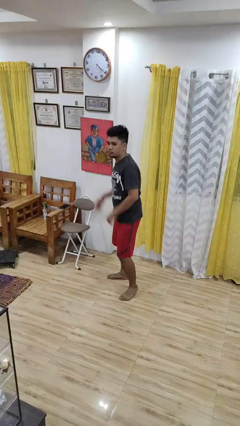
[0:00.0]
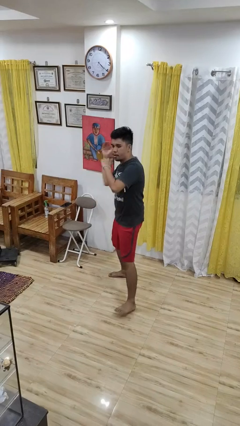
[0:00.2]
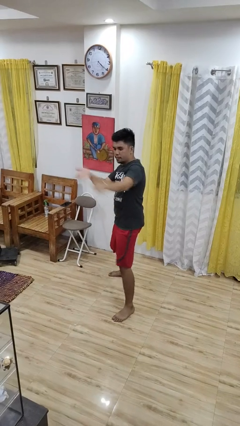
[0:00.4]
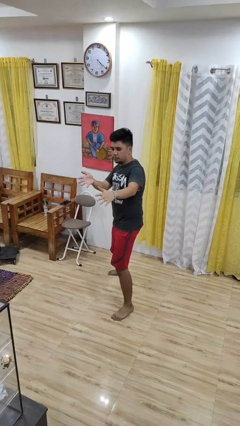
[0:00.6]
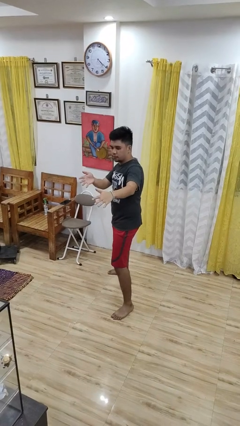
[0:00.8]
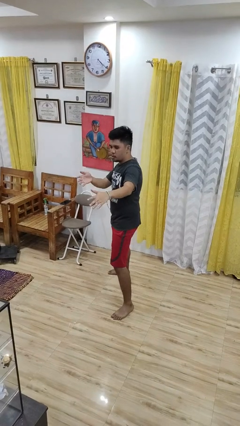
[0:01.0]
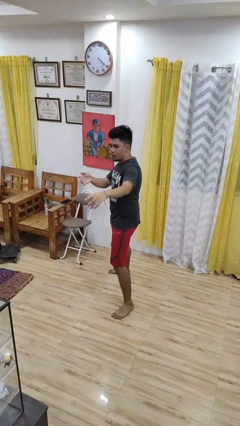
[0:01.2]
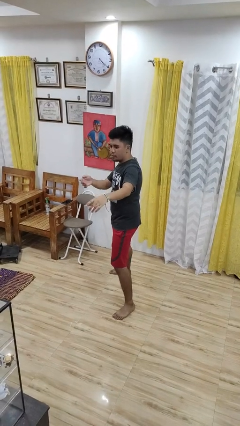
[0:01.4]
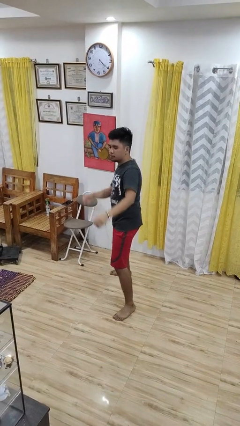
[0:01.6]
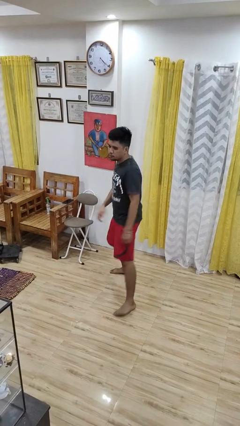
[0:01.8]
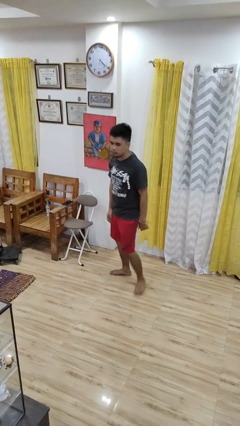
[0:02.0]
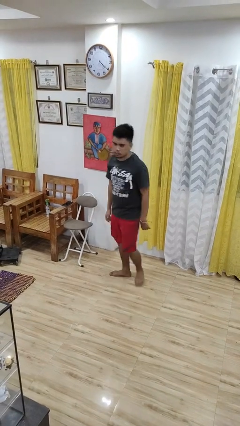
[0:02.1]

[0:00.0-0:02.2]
person karate chop

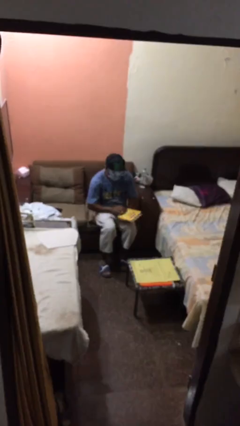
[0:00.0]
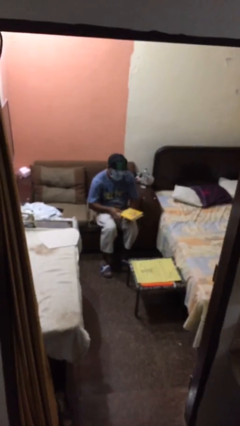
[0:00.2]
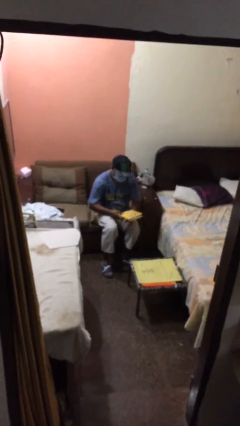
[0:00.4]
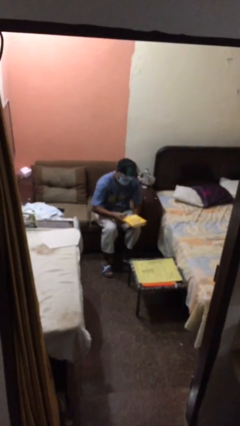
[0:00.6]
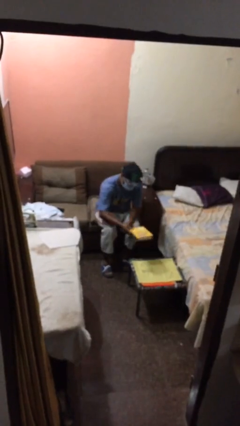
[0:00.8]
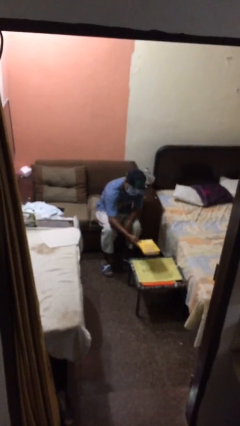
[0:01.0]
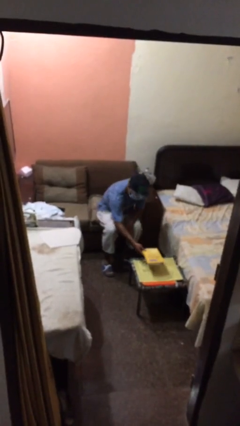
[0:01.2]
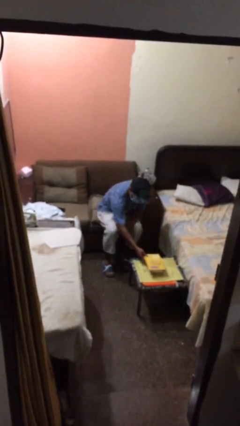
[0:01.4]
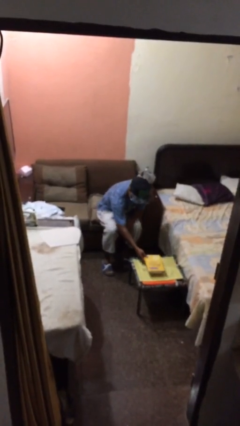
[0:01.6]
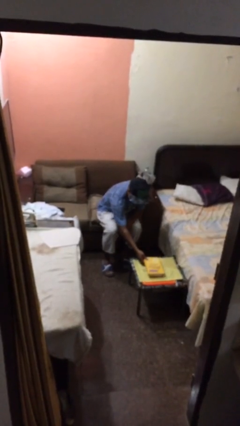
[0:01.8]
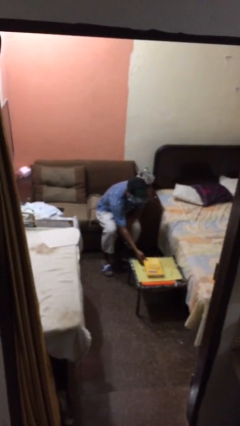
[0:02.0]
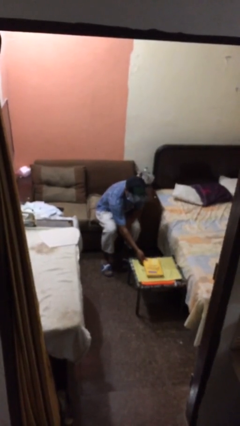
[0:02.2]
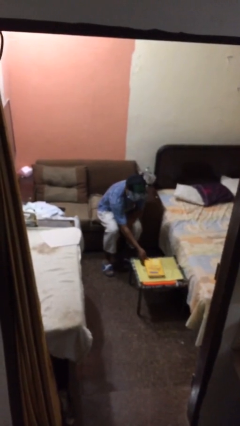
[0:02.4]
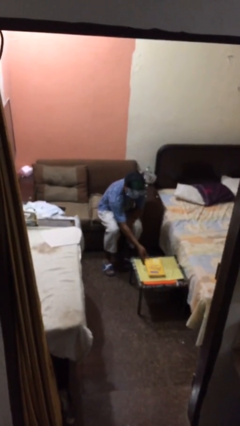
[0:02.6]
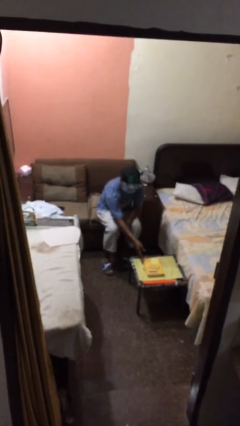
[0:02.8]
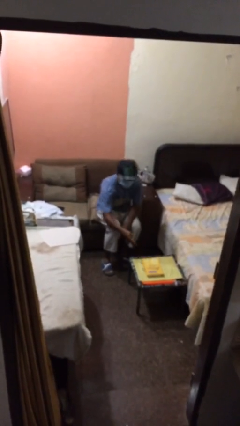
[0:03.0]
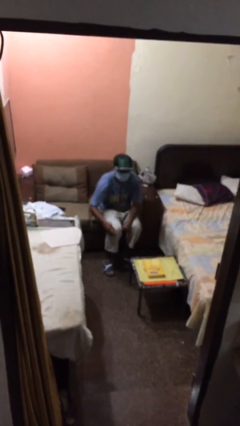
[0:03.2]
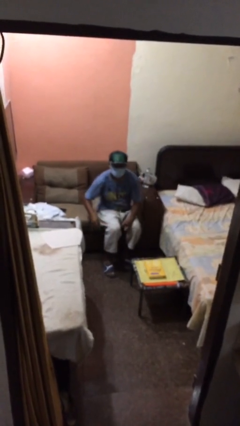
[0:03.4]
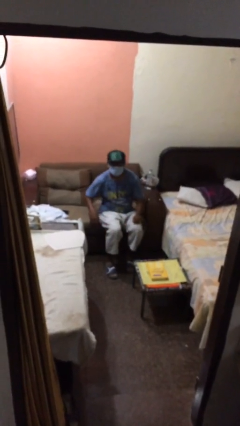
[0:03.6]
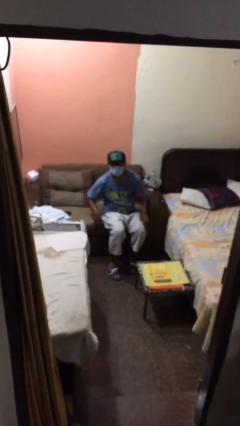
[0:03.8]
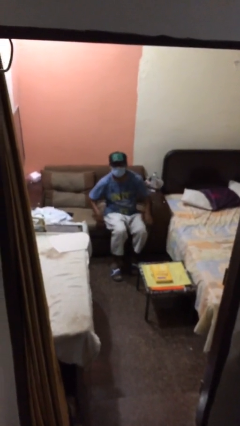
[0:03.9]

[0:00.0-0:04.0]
person puts down object on table

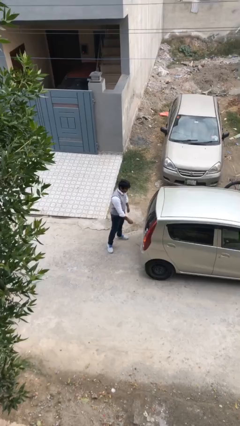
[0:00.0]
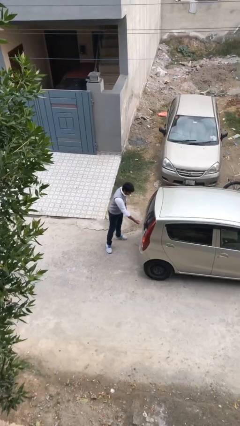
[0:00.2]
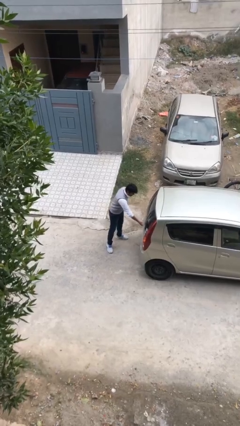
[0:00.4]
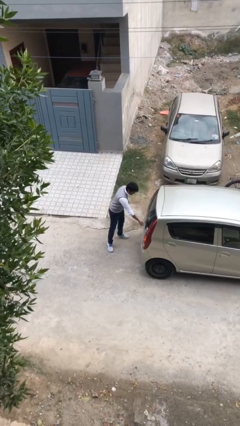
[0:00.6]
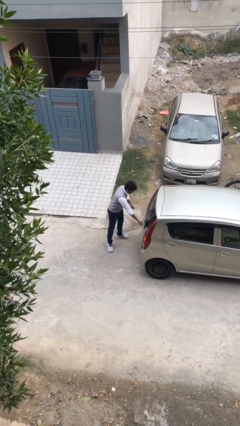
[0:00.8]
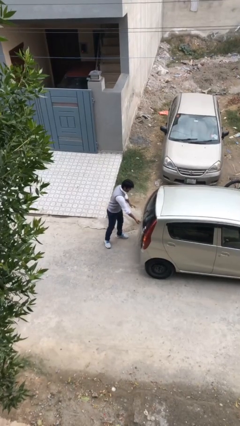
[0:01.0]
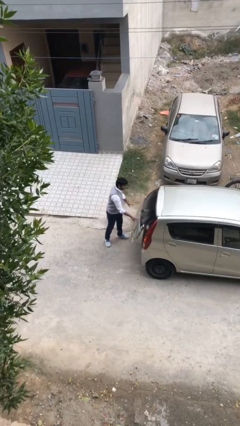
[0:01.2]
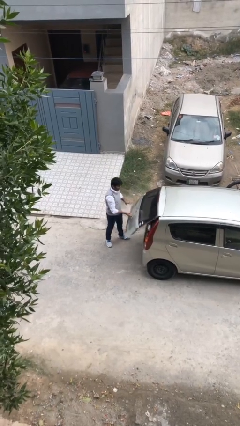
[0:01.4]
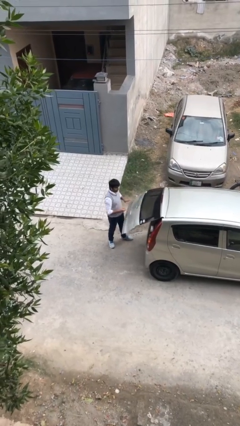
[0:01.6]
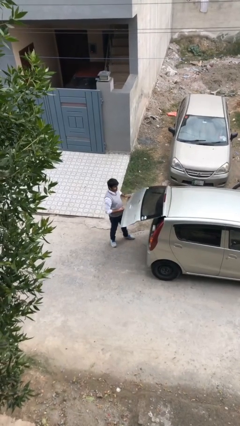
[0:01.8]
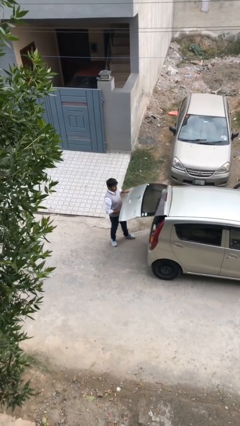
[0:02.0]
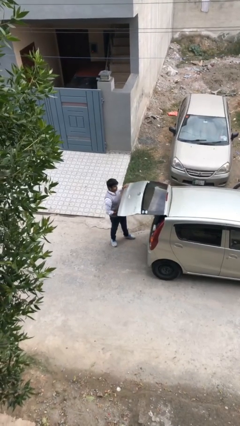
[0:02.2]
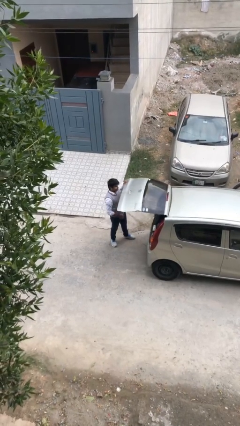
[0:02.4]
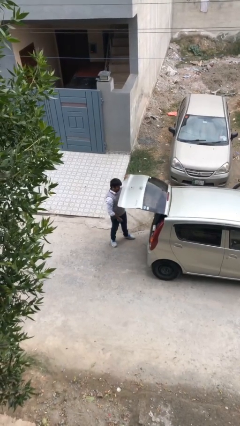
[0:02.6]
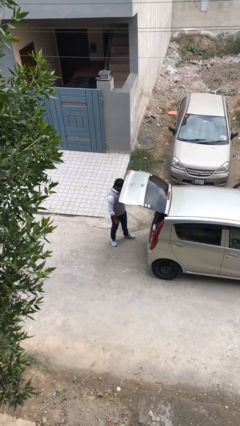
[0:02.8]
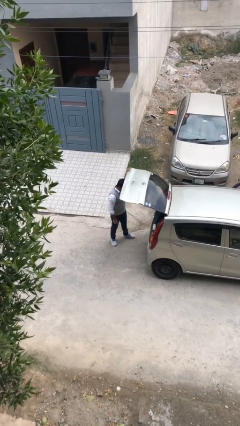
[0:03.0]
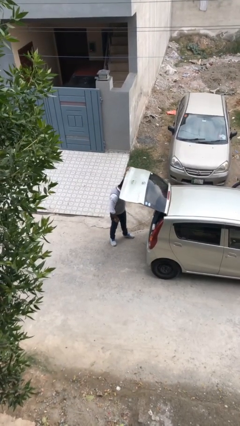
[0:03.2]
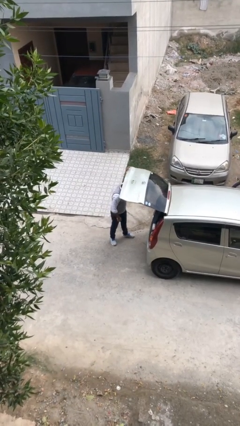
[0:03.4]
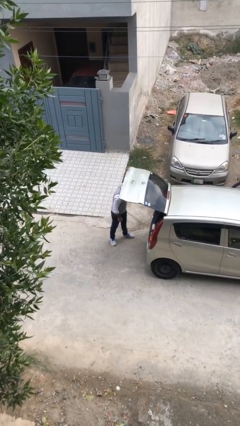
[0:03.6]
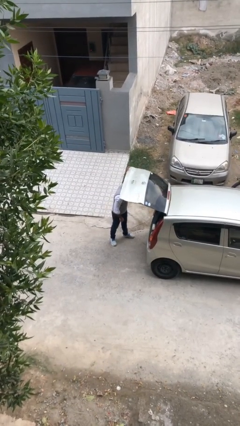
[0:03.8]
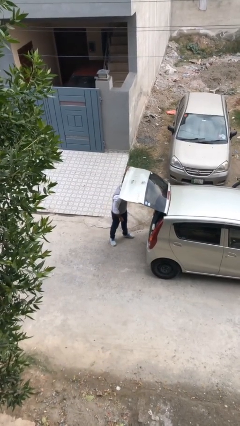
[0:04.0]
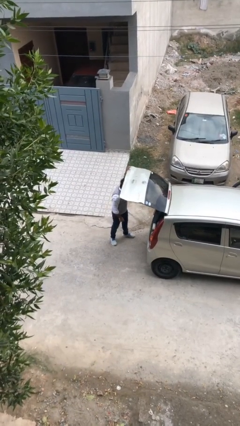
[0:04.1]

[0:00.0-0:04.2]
person opens car trunk

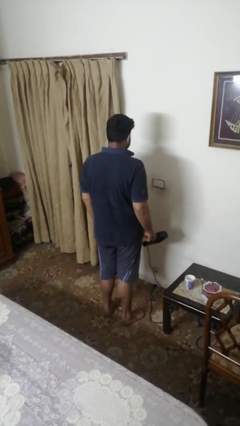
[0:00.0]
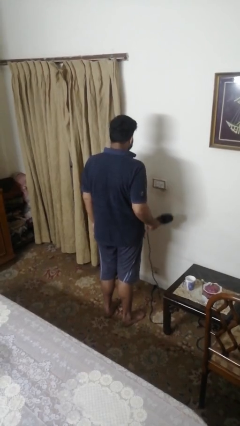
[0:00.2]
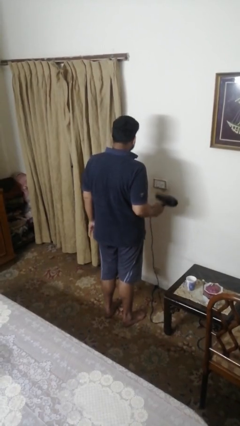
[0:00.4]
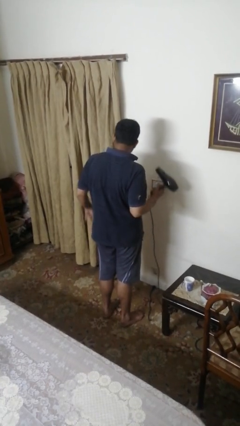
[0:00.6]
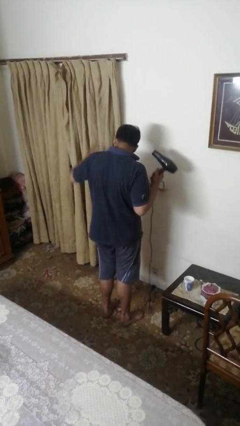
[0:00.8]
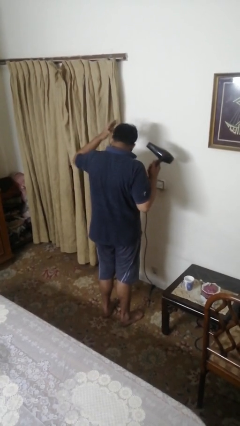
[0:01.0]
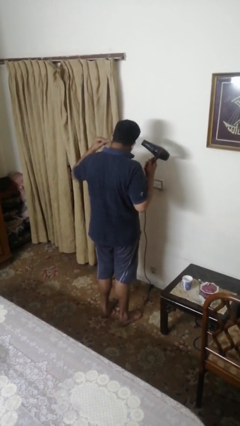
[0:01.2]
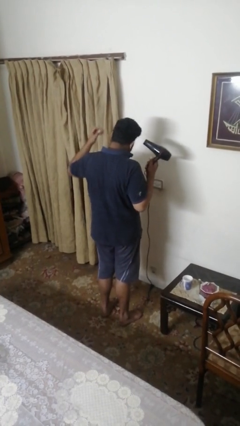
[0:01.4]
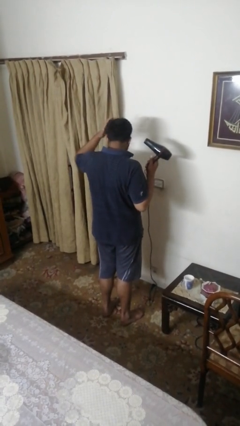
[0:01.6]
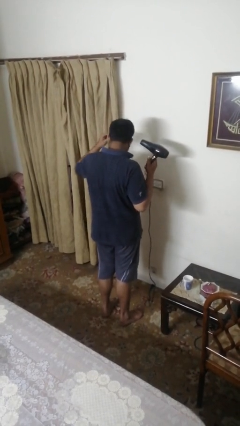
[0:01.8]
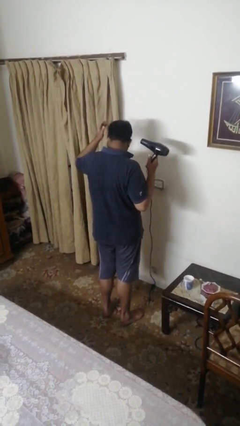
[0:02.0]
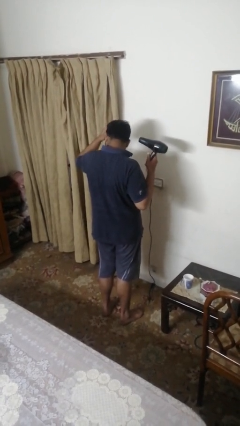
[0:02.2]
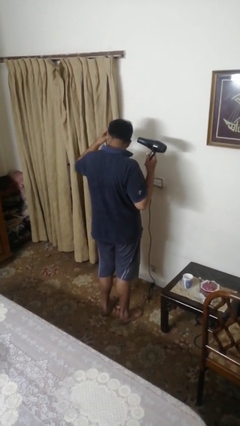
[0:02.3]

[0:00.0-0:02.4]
person dries hair with hairdryer

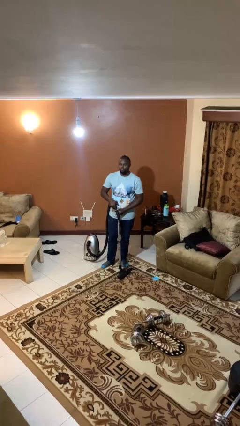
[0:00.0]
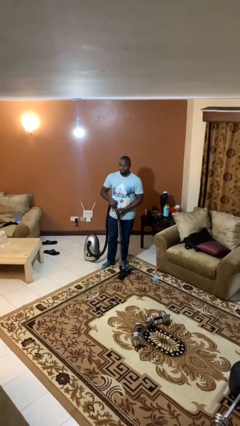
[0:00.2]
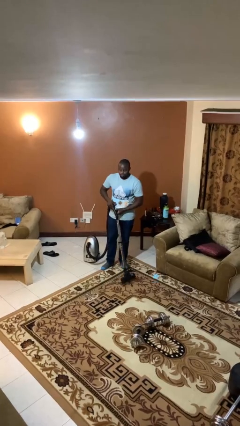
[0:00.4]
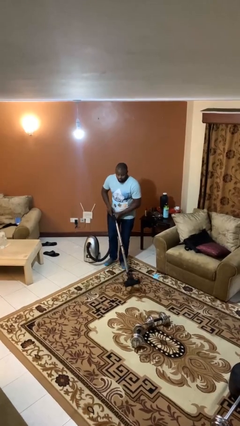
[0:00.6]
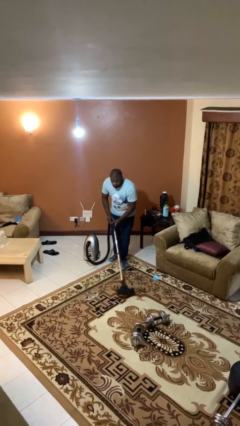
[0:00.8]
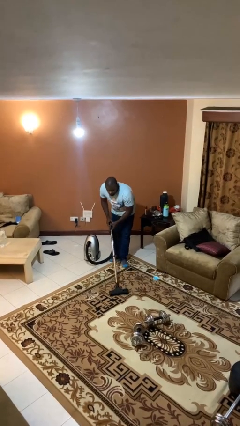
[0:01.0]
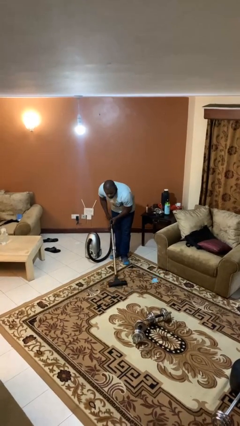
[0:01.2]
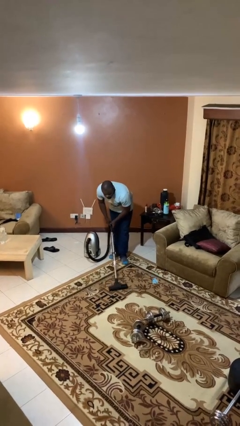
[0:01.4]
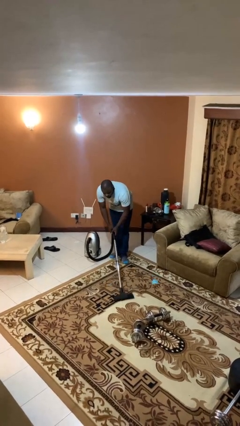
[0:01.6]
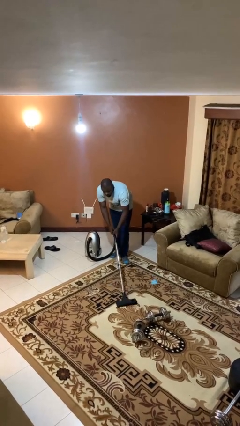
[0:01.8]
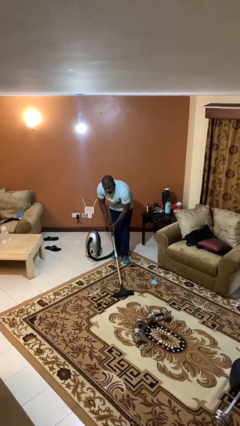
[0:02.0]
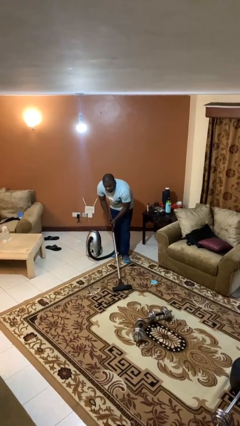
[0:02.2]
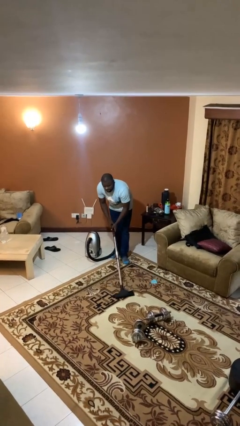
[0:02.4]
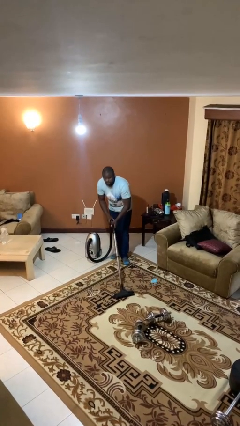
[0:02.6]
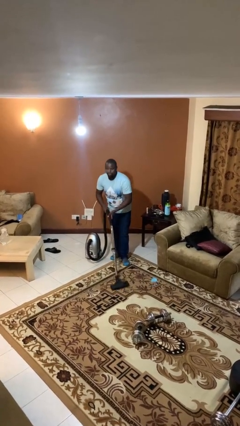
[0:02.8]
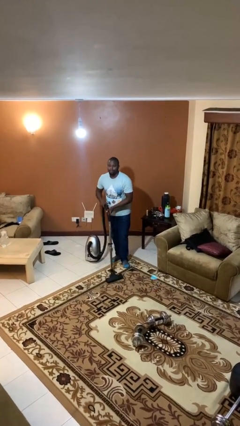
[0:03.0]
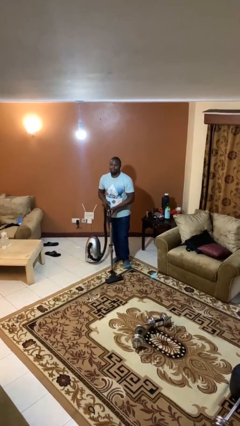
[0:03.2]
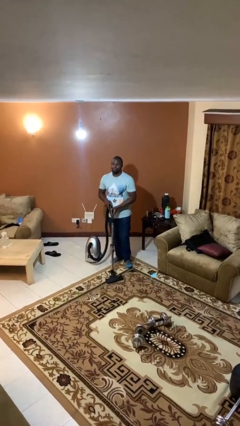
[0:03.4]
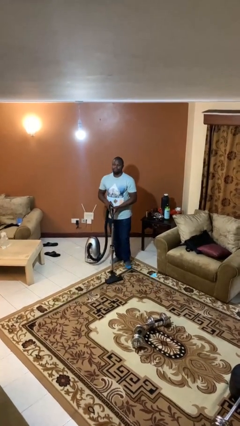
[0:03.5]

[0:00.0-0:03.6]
person vacuums carpet

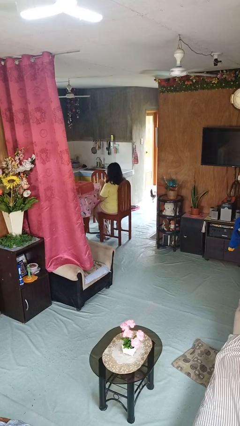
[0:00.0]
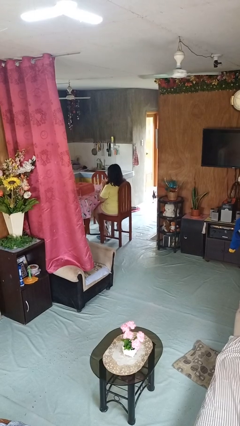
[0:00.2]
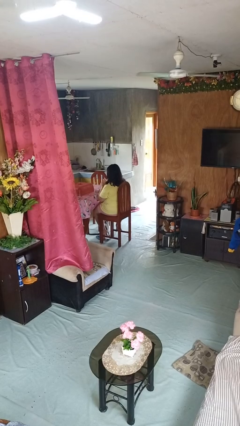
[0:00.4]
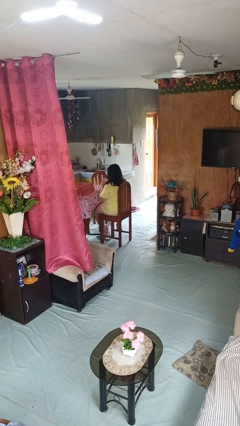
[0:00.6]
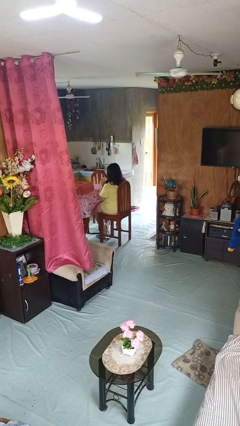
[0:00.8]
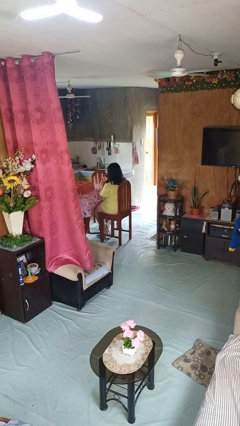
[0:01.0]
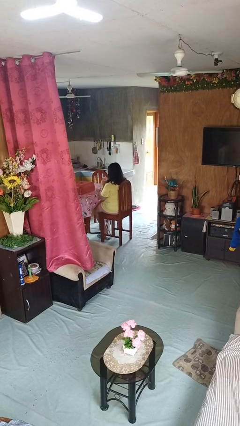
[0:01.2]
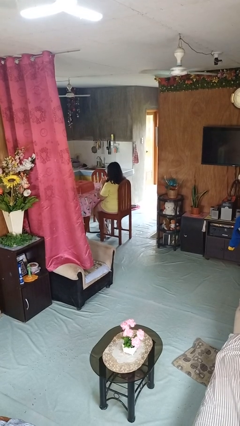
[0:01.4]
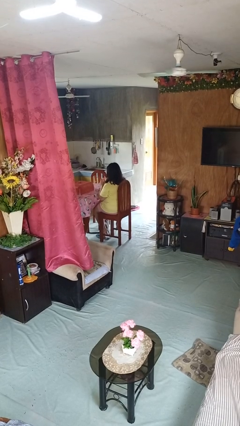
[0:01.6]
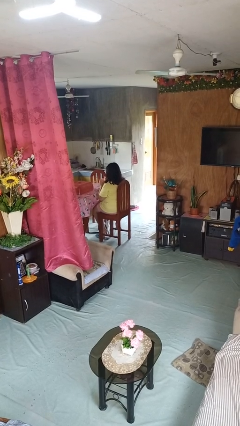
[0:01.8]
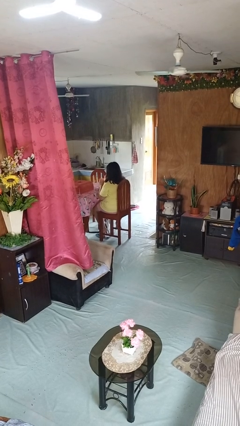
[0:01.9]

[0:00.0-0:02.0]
person drinks from straw
